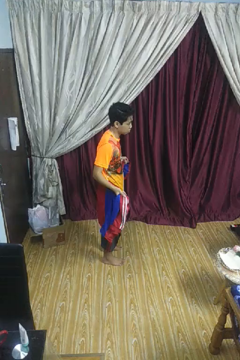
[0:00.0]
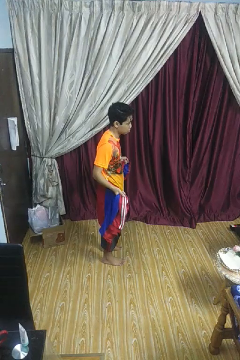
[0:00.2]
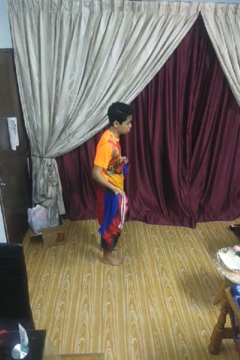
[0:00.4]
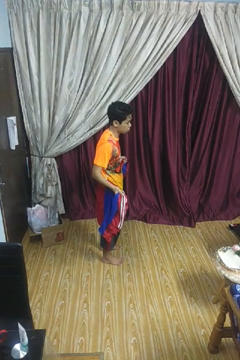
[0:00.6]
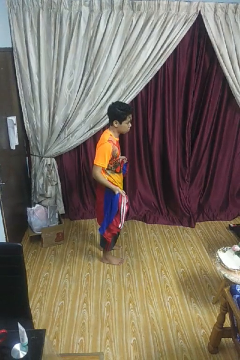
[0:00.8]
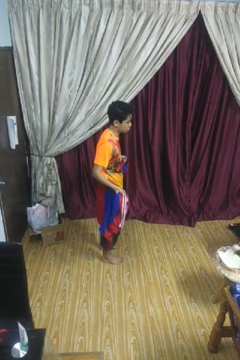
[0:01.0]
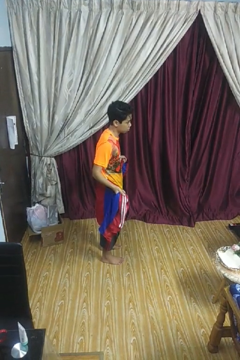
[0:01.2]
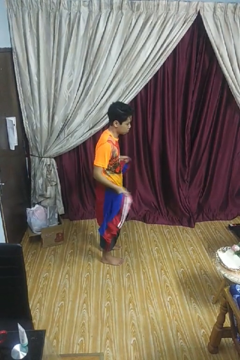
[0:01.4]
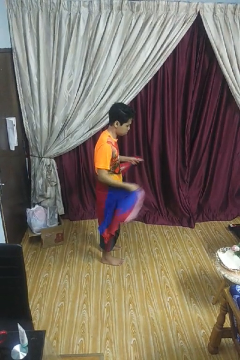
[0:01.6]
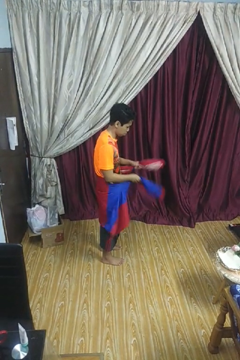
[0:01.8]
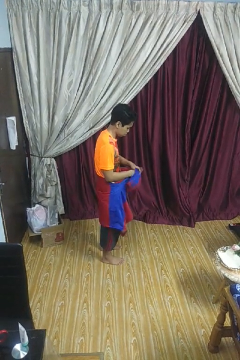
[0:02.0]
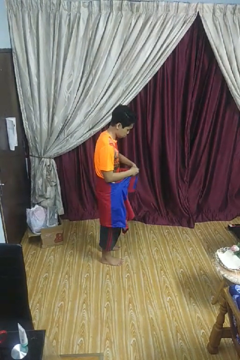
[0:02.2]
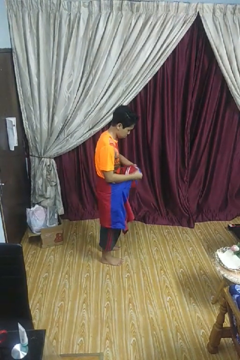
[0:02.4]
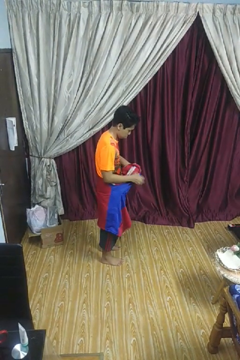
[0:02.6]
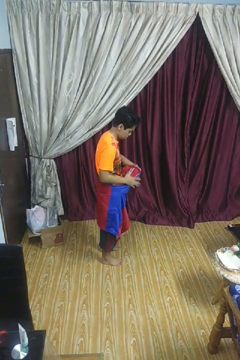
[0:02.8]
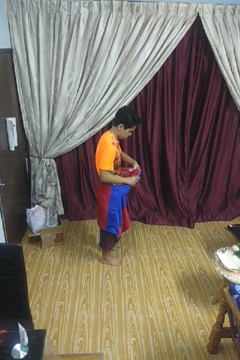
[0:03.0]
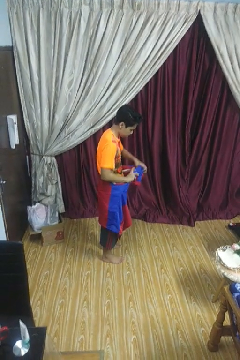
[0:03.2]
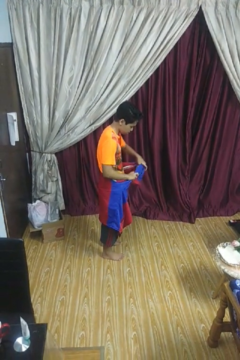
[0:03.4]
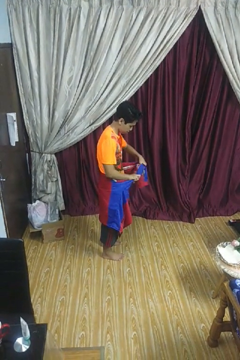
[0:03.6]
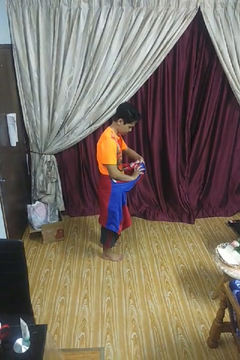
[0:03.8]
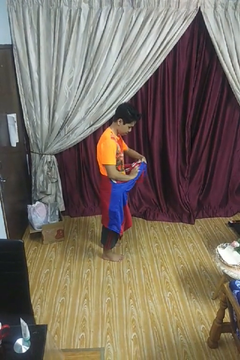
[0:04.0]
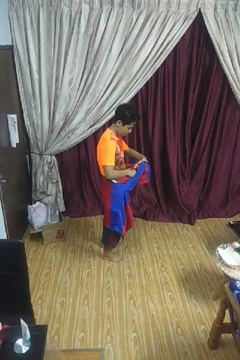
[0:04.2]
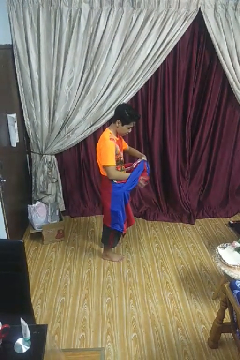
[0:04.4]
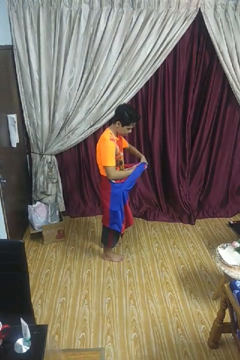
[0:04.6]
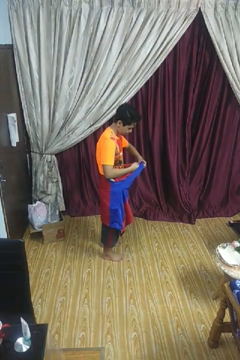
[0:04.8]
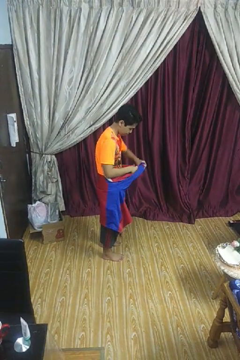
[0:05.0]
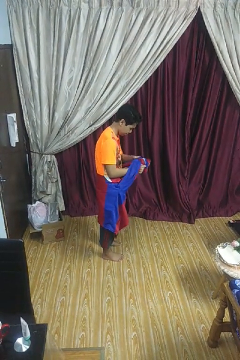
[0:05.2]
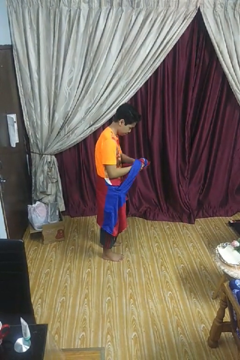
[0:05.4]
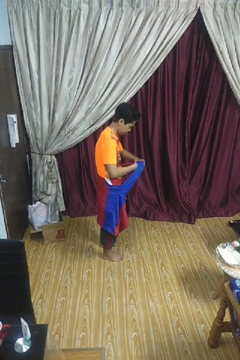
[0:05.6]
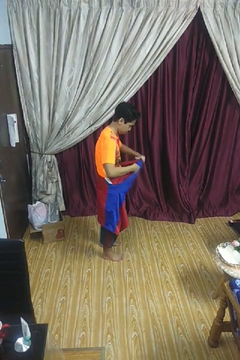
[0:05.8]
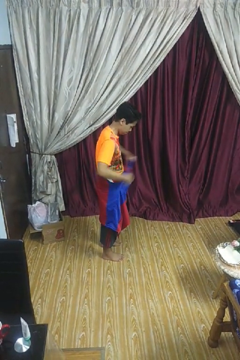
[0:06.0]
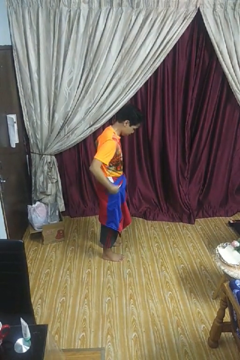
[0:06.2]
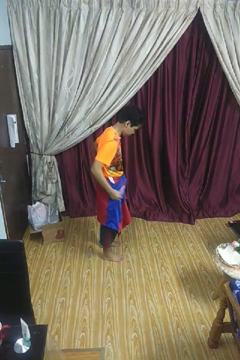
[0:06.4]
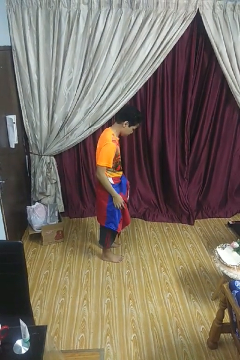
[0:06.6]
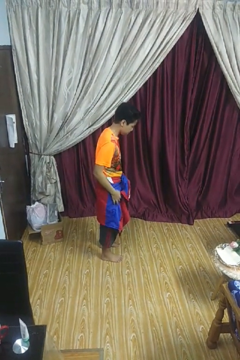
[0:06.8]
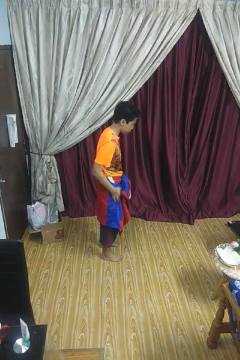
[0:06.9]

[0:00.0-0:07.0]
person ties jacket around waist

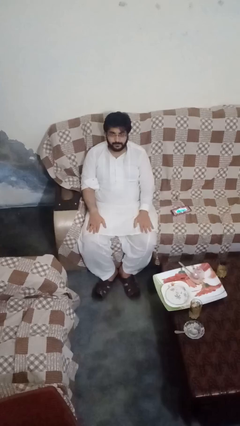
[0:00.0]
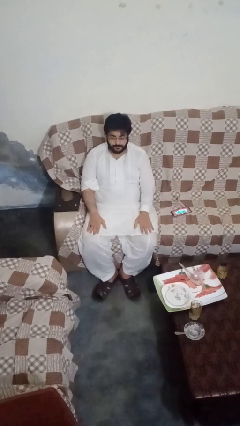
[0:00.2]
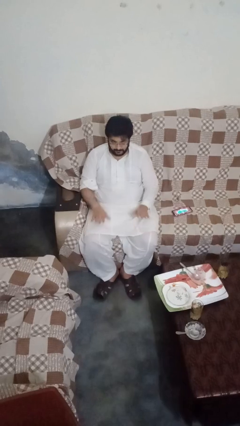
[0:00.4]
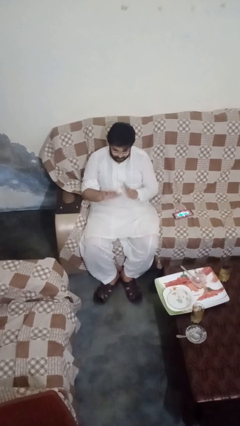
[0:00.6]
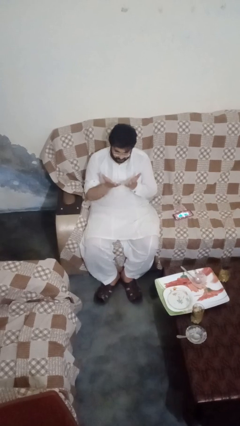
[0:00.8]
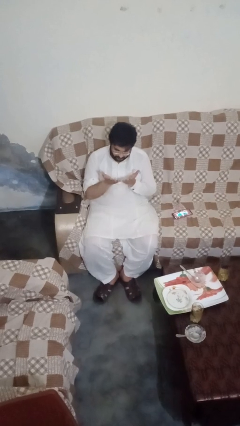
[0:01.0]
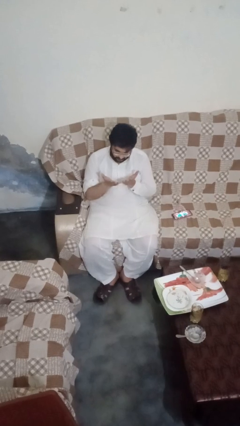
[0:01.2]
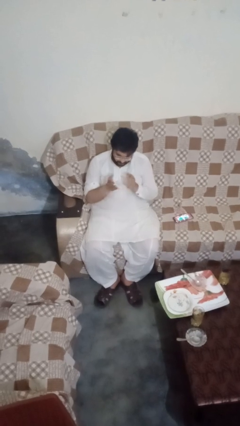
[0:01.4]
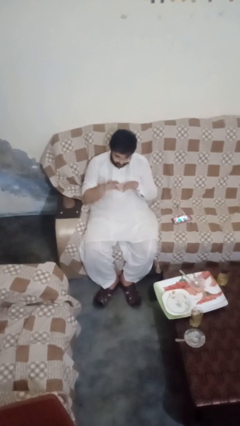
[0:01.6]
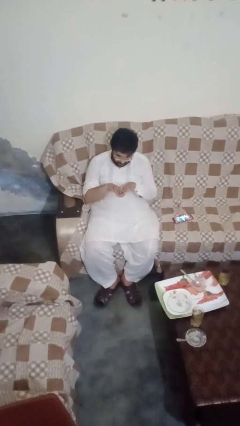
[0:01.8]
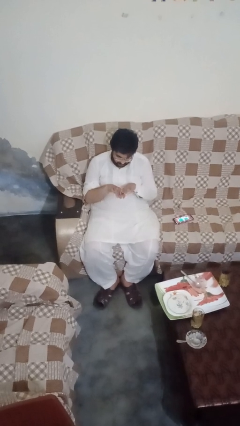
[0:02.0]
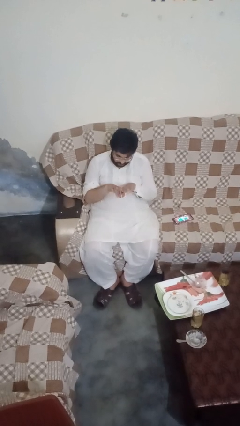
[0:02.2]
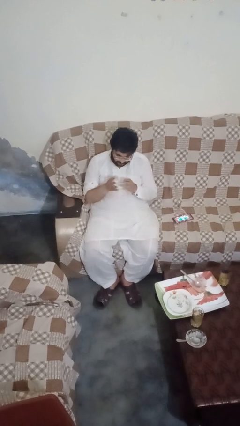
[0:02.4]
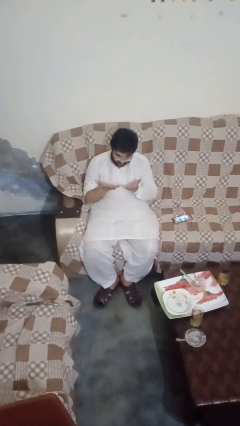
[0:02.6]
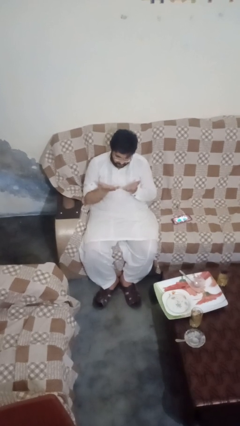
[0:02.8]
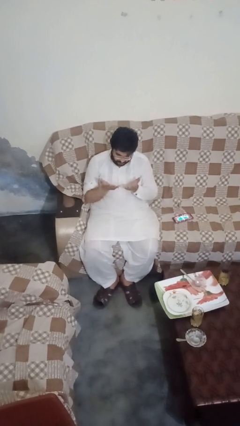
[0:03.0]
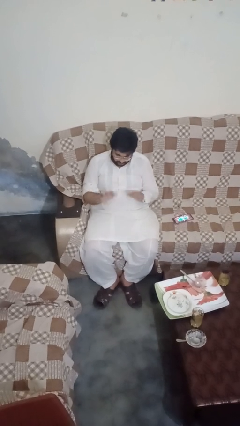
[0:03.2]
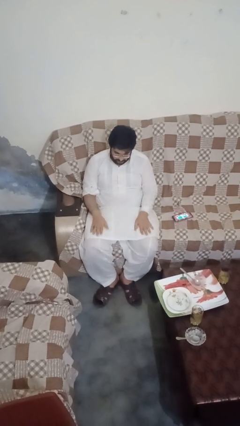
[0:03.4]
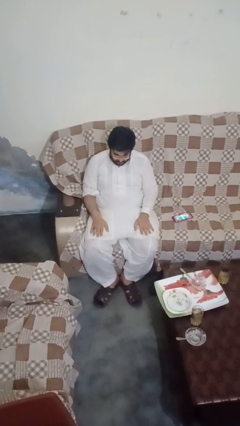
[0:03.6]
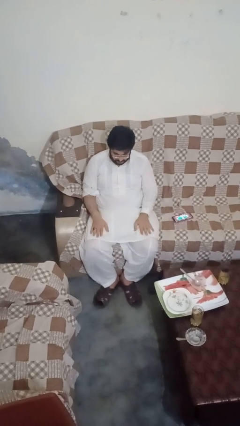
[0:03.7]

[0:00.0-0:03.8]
person looks at hands in lap

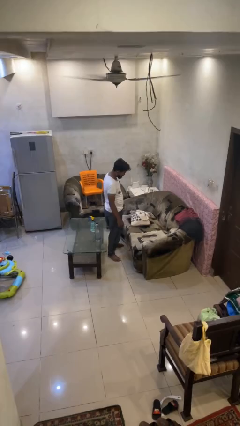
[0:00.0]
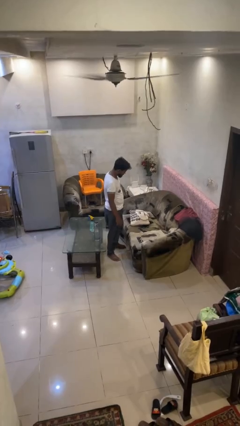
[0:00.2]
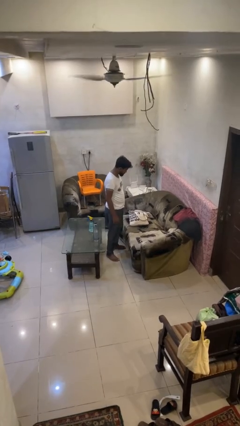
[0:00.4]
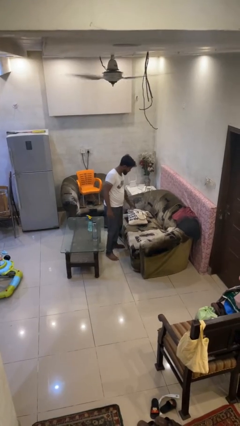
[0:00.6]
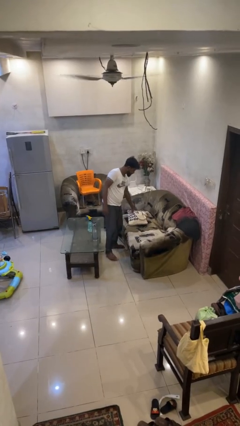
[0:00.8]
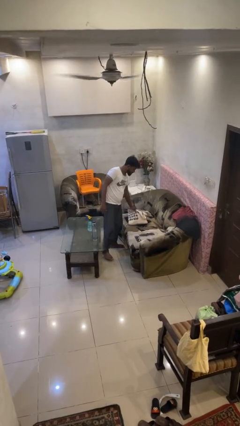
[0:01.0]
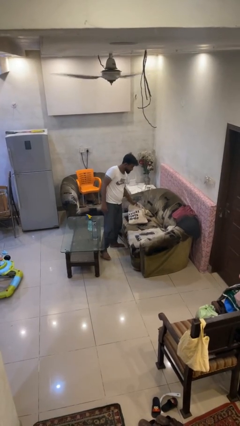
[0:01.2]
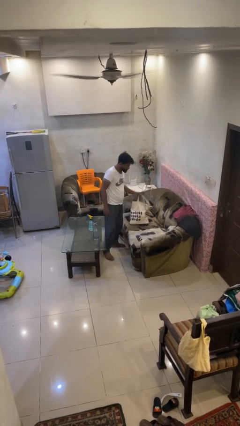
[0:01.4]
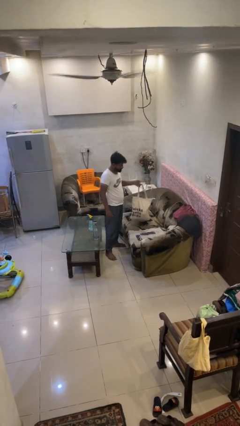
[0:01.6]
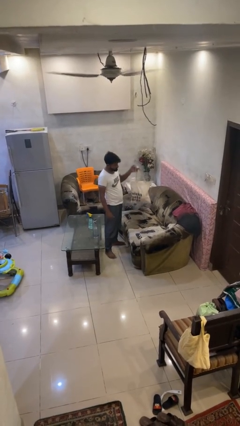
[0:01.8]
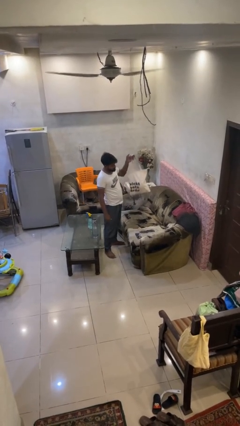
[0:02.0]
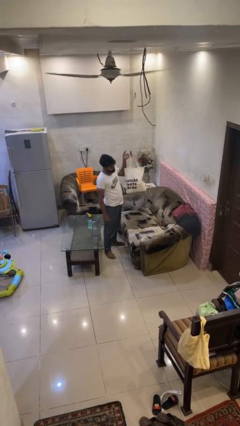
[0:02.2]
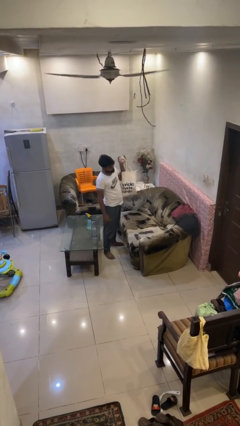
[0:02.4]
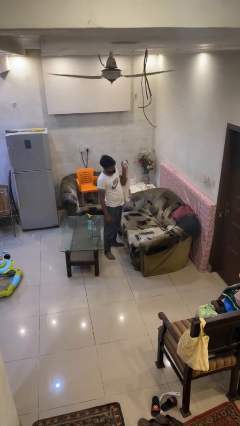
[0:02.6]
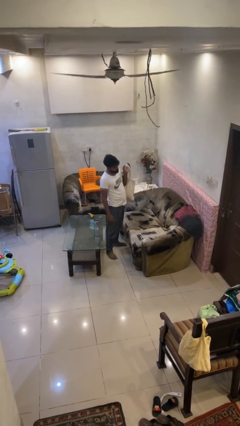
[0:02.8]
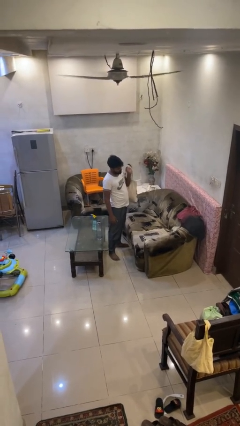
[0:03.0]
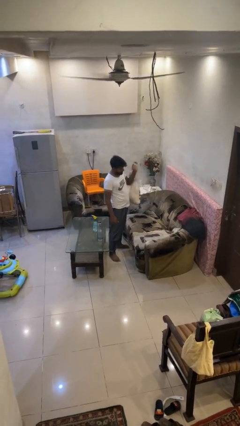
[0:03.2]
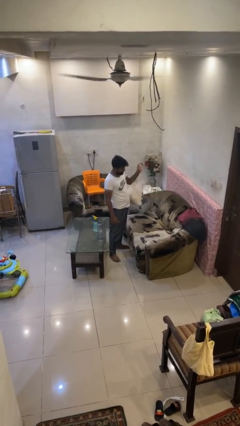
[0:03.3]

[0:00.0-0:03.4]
person picks up object from couch

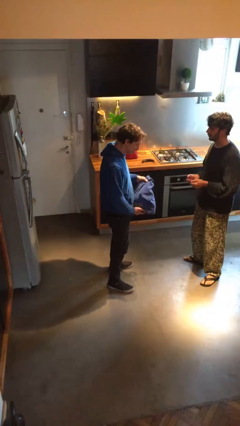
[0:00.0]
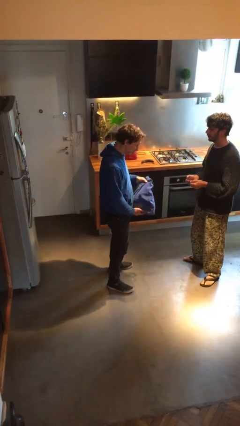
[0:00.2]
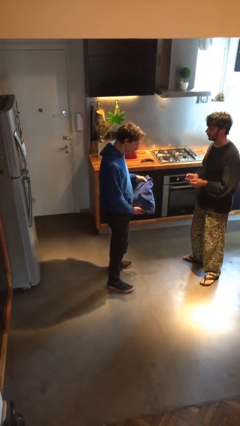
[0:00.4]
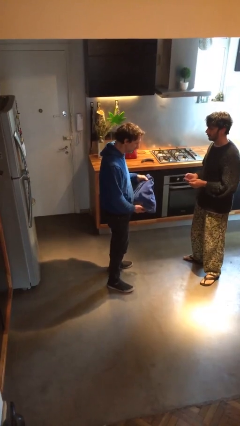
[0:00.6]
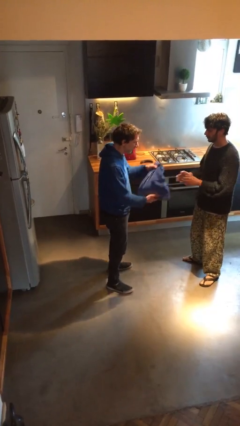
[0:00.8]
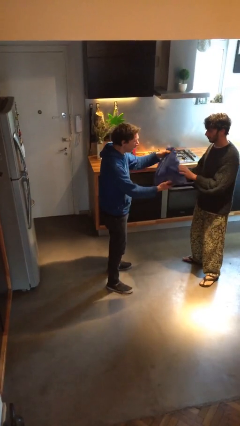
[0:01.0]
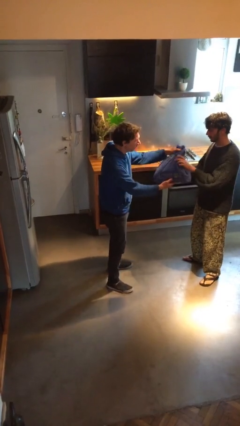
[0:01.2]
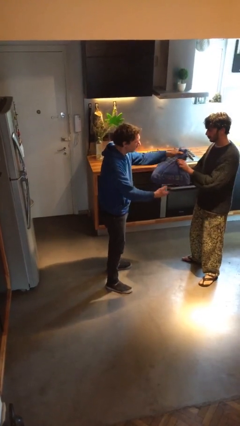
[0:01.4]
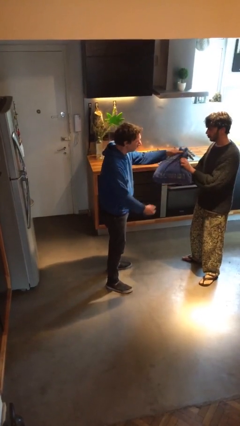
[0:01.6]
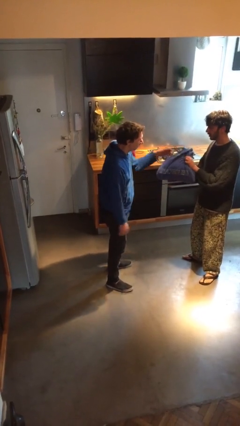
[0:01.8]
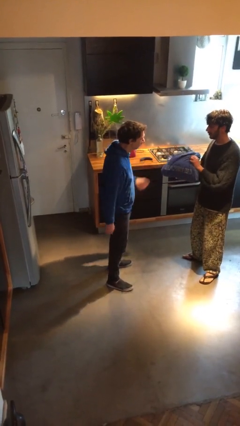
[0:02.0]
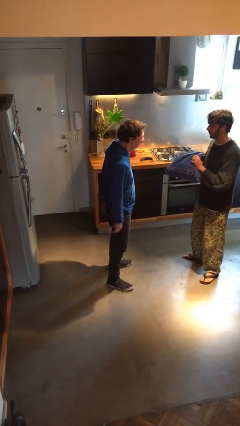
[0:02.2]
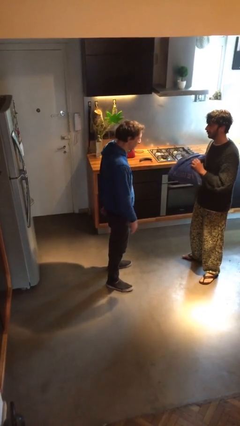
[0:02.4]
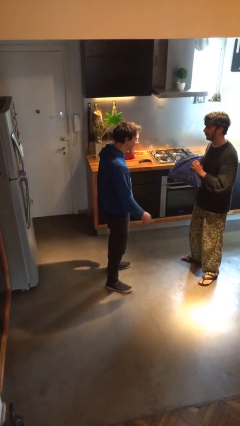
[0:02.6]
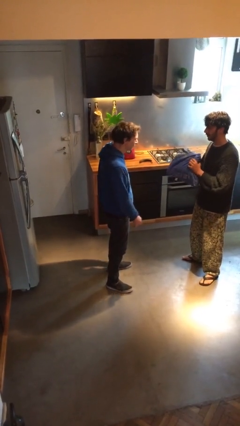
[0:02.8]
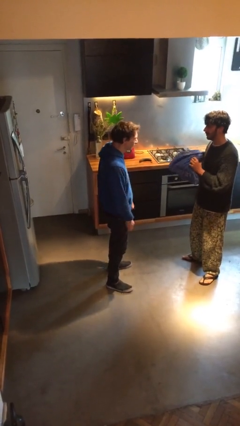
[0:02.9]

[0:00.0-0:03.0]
person transfers object to person

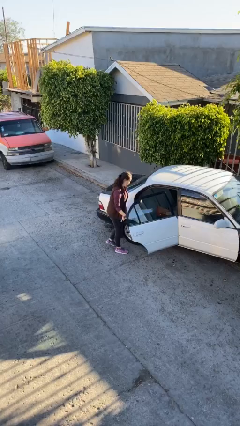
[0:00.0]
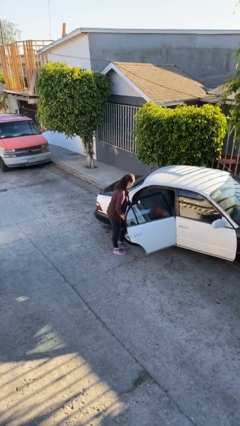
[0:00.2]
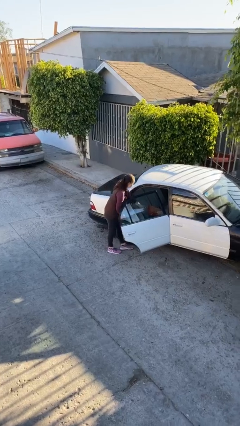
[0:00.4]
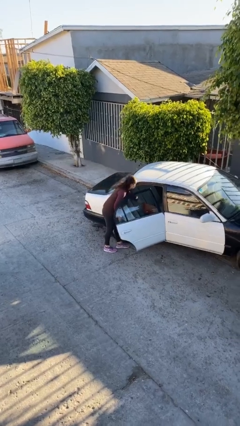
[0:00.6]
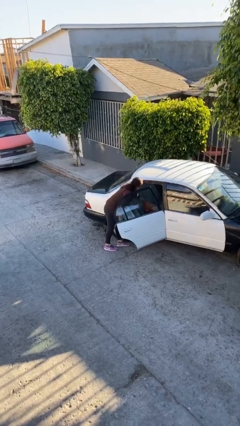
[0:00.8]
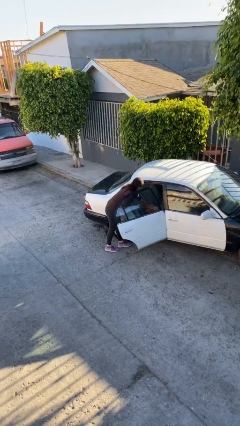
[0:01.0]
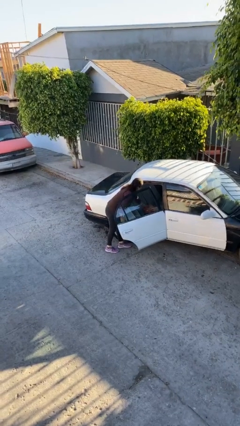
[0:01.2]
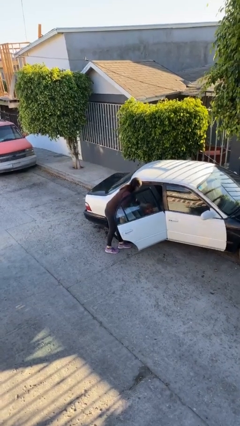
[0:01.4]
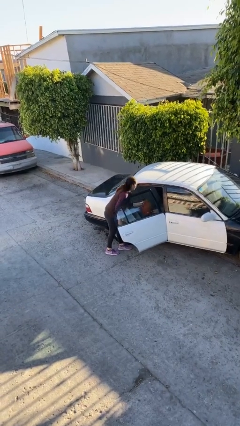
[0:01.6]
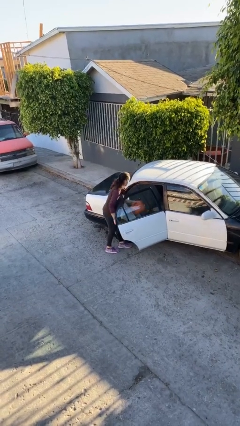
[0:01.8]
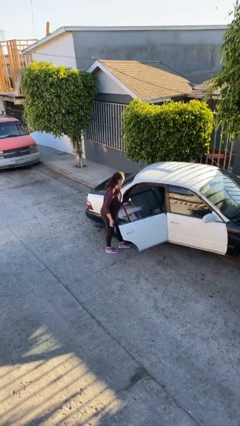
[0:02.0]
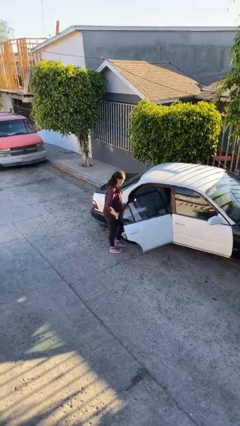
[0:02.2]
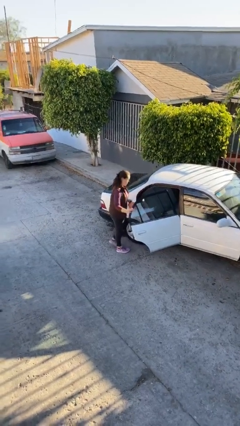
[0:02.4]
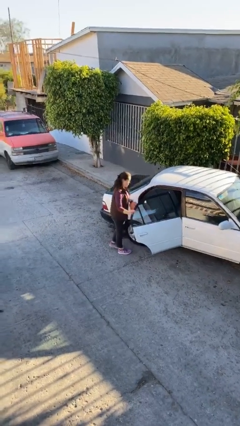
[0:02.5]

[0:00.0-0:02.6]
person unloads car
